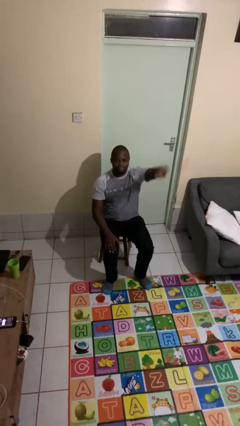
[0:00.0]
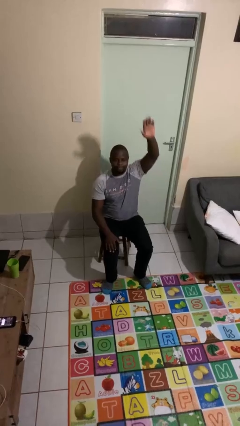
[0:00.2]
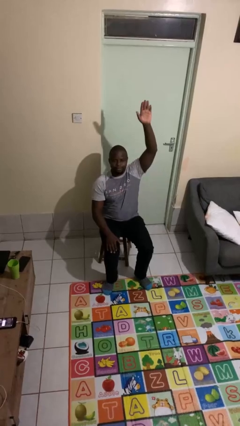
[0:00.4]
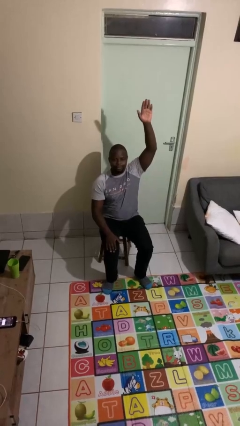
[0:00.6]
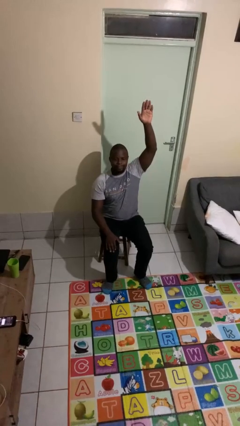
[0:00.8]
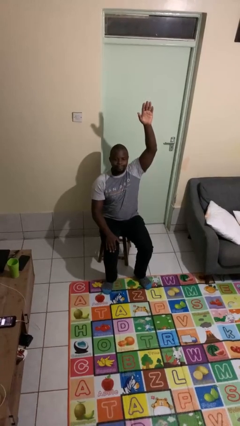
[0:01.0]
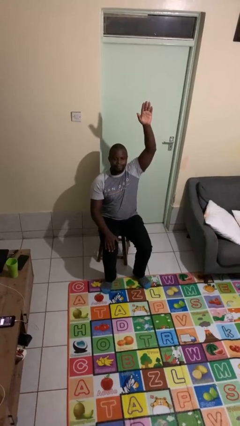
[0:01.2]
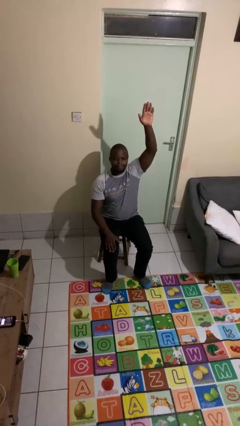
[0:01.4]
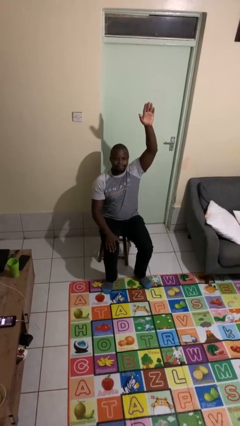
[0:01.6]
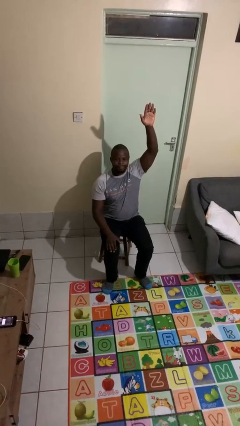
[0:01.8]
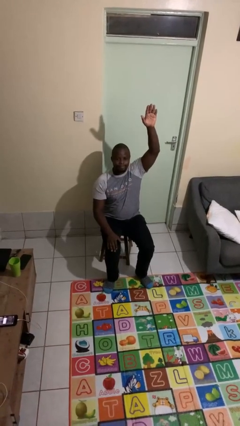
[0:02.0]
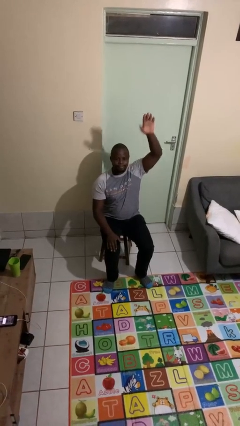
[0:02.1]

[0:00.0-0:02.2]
person gestures raise hand

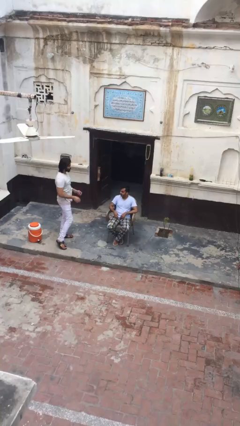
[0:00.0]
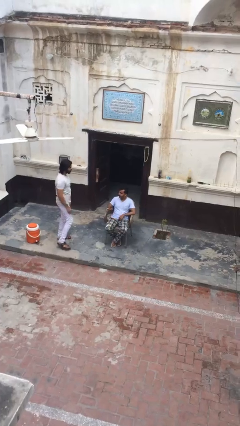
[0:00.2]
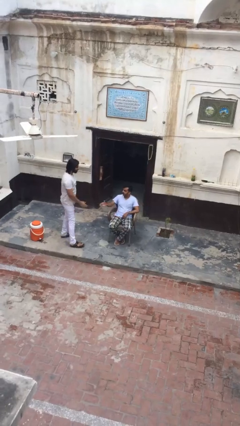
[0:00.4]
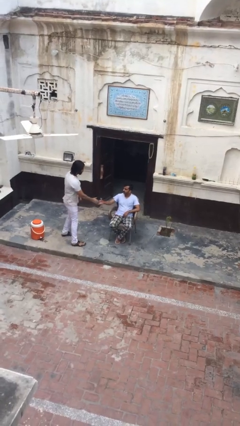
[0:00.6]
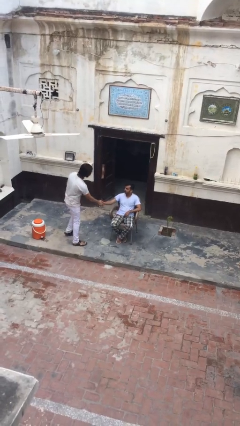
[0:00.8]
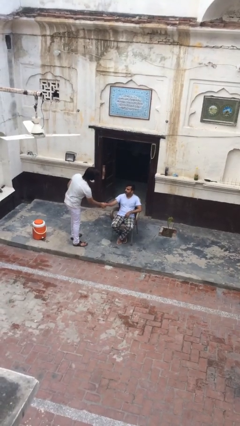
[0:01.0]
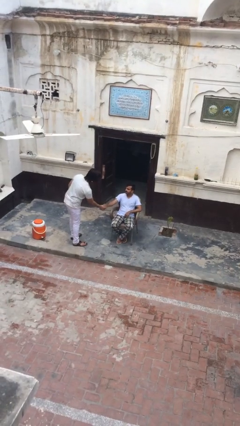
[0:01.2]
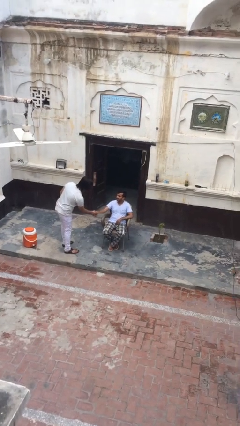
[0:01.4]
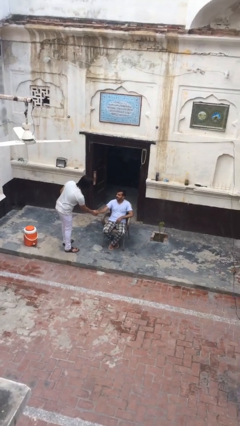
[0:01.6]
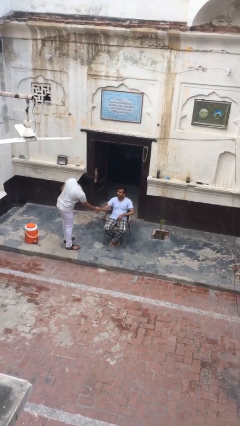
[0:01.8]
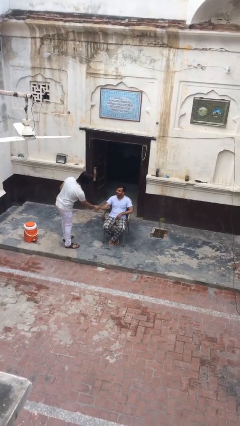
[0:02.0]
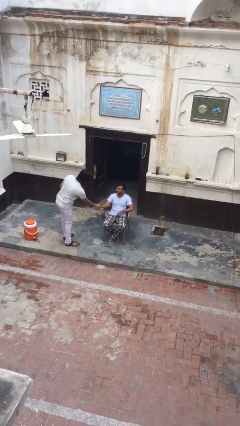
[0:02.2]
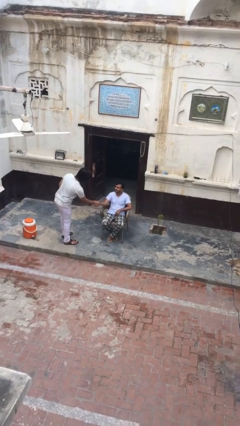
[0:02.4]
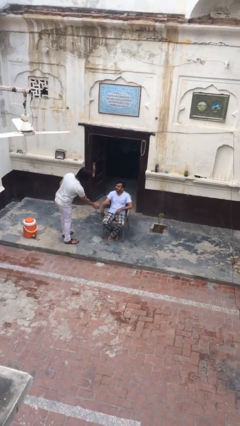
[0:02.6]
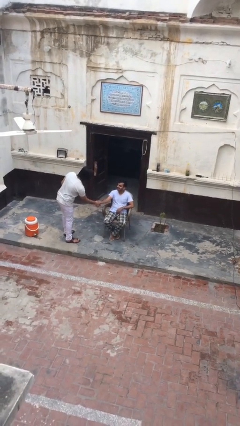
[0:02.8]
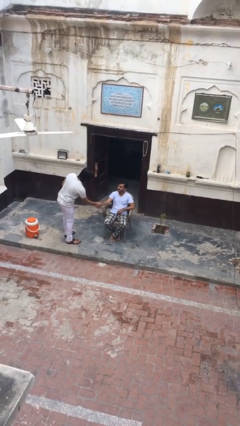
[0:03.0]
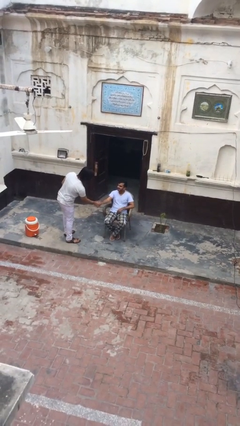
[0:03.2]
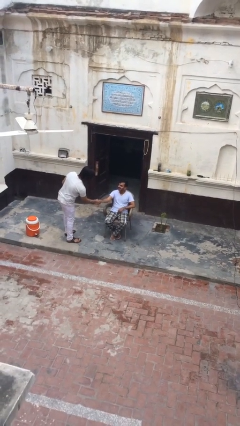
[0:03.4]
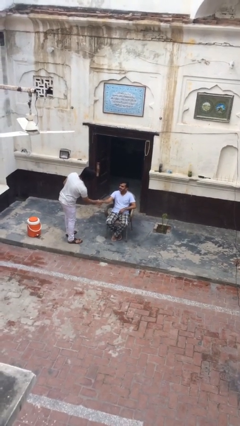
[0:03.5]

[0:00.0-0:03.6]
person shakes hand

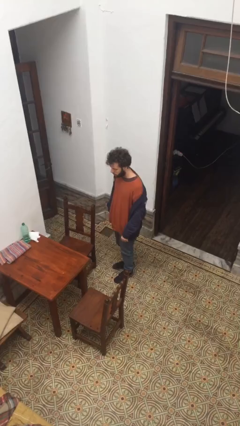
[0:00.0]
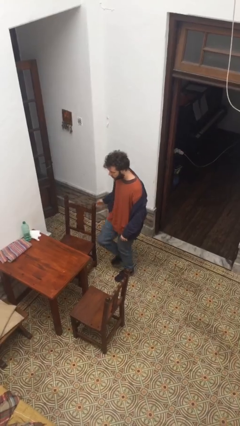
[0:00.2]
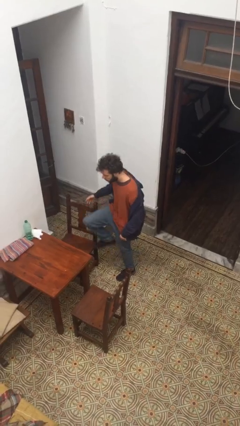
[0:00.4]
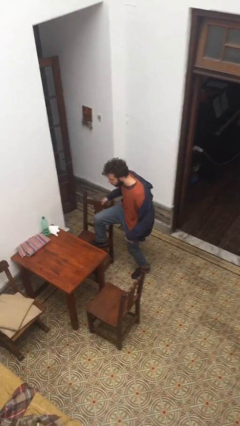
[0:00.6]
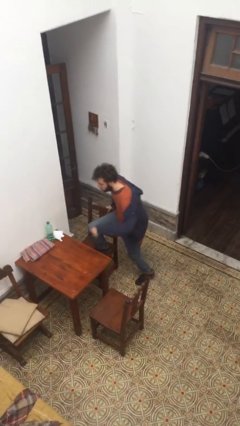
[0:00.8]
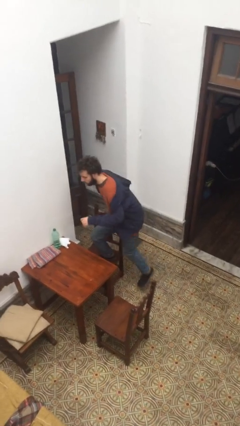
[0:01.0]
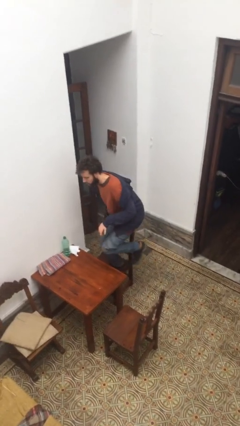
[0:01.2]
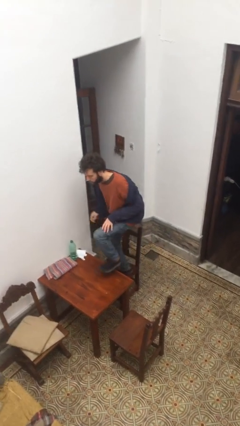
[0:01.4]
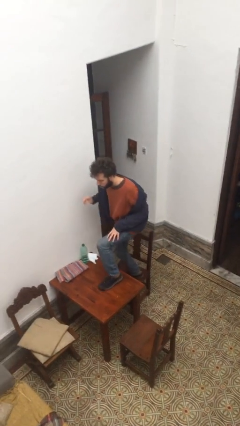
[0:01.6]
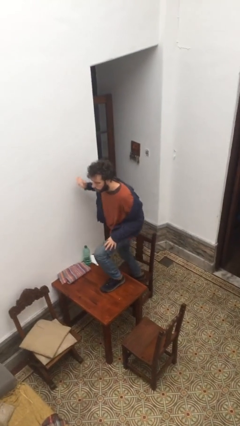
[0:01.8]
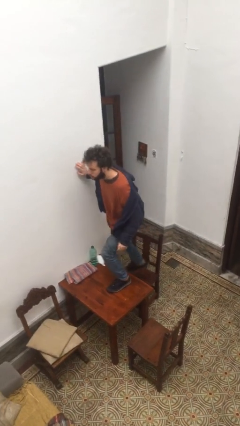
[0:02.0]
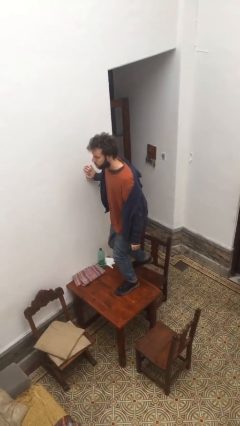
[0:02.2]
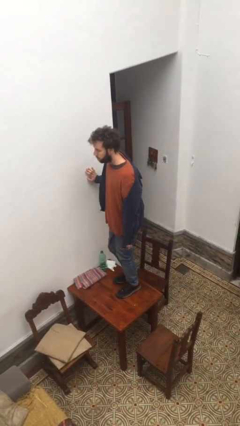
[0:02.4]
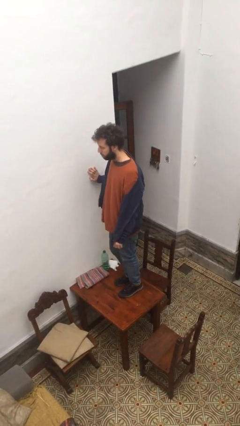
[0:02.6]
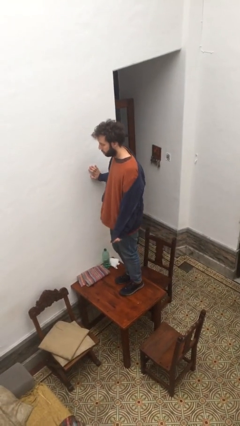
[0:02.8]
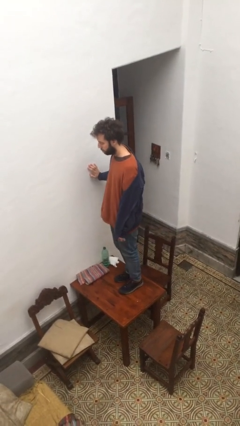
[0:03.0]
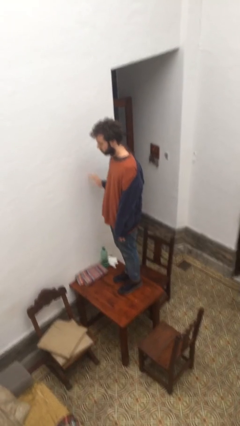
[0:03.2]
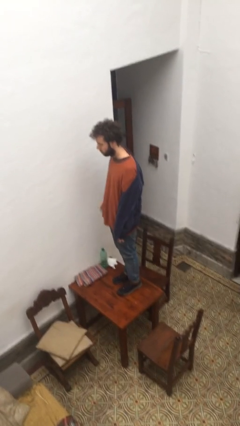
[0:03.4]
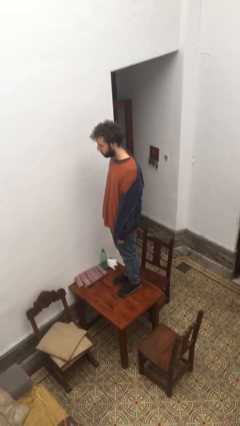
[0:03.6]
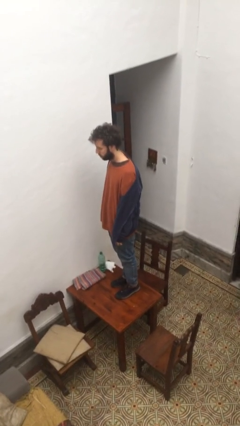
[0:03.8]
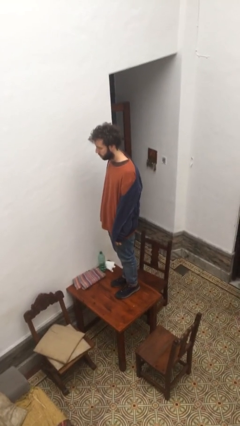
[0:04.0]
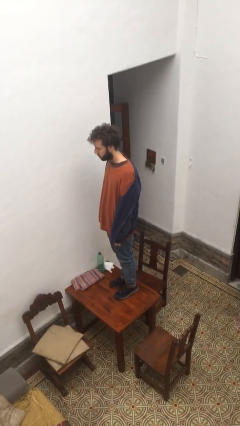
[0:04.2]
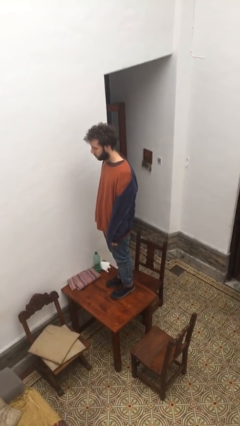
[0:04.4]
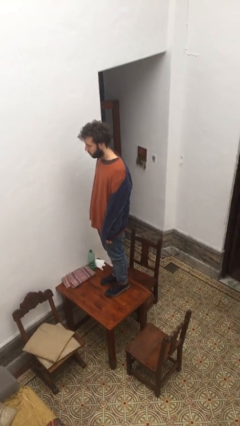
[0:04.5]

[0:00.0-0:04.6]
person climbs on table

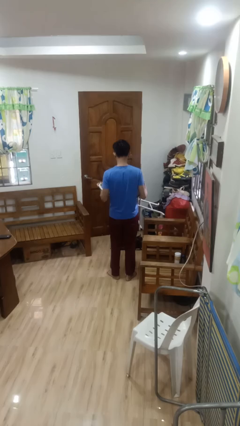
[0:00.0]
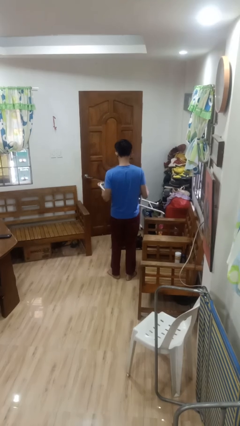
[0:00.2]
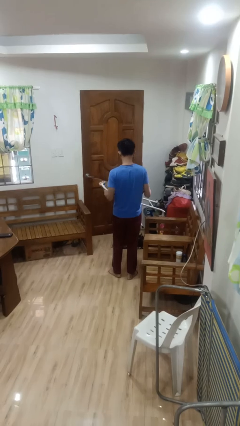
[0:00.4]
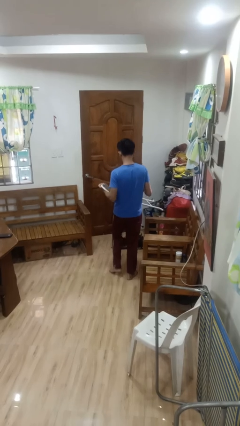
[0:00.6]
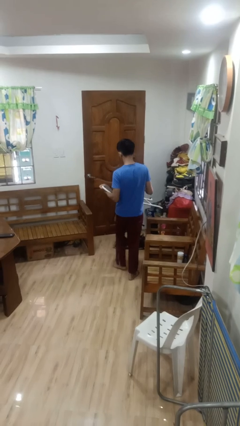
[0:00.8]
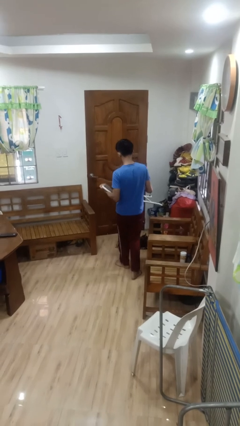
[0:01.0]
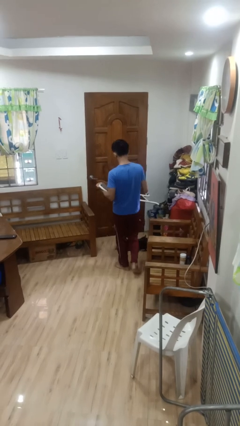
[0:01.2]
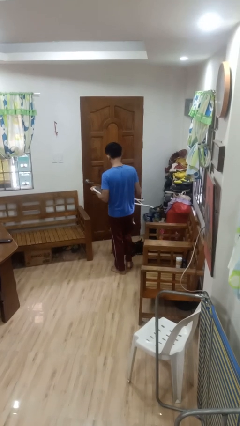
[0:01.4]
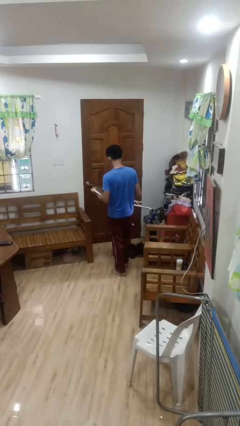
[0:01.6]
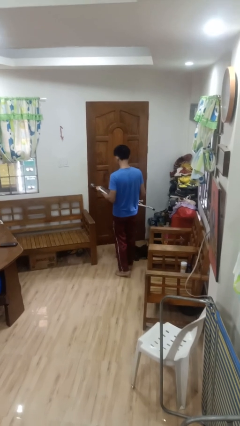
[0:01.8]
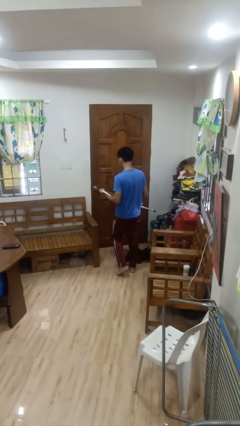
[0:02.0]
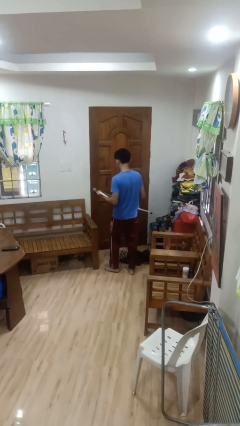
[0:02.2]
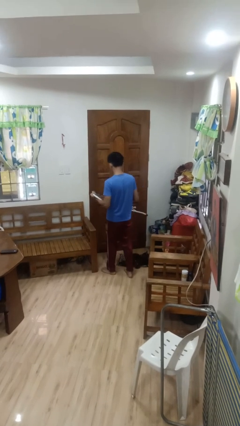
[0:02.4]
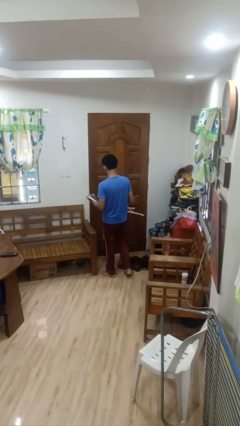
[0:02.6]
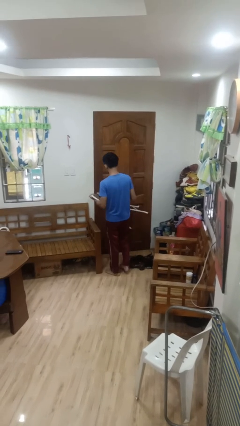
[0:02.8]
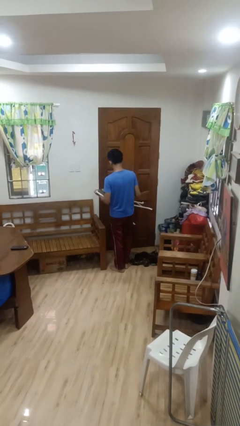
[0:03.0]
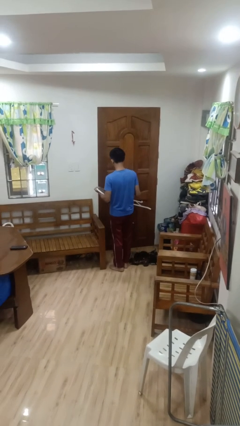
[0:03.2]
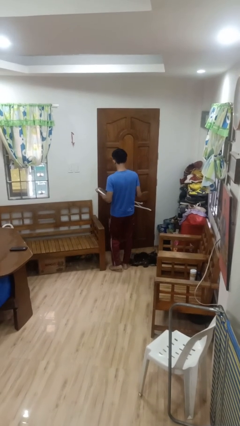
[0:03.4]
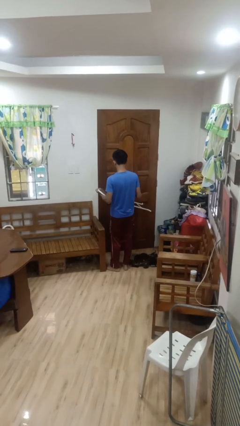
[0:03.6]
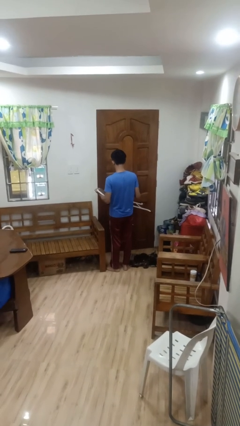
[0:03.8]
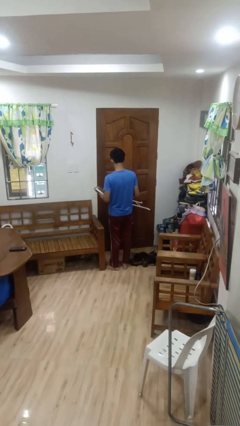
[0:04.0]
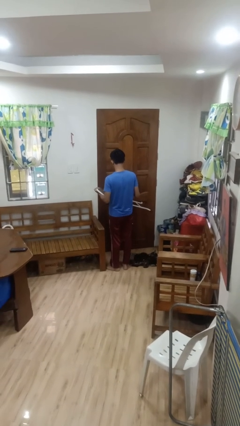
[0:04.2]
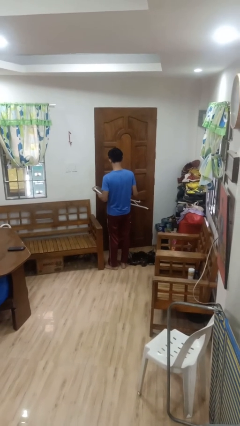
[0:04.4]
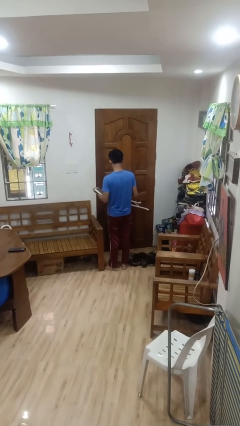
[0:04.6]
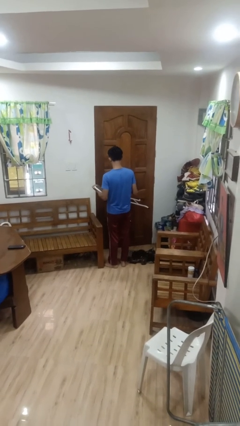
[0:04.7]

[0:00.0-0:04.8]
person carries furniture

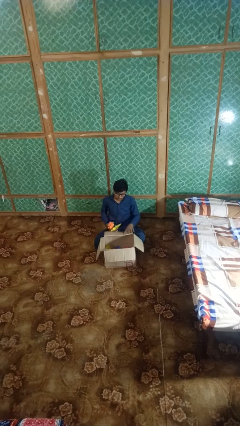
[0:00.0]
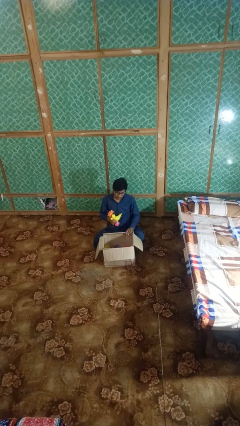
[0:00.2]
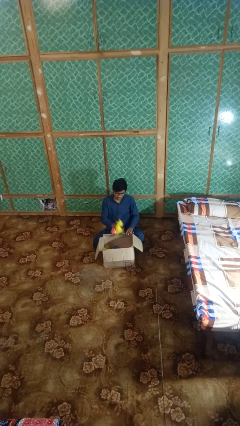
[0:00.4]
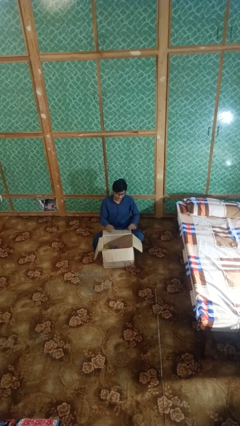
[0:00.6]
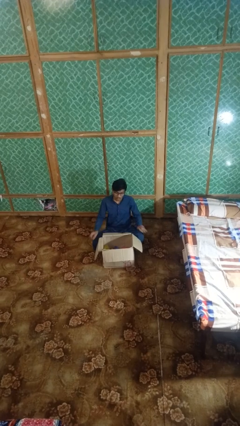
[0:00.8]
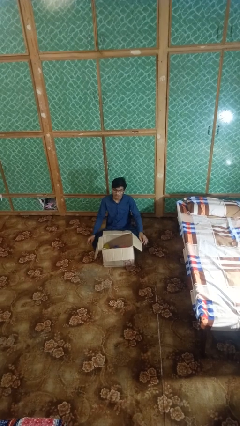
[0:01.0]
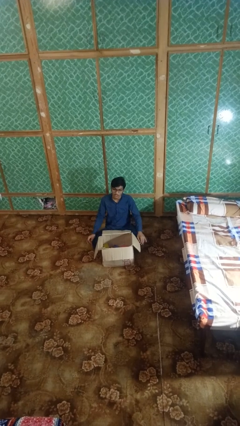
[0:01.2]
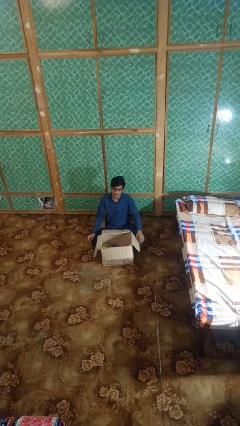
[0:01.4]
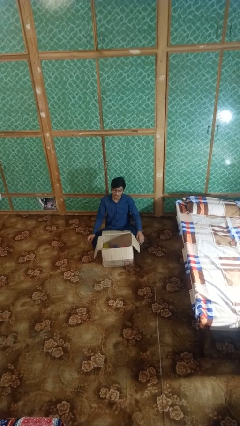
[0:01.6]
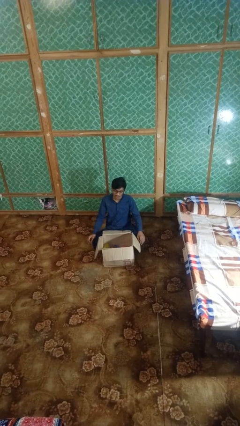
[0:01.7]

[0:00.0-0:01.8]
person puts object into box

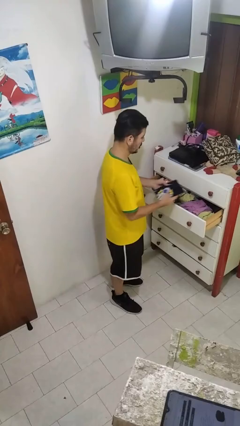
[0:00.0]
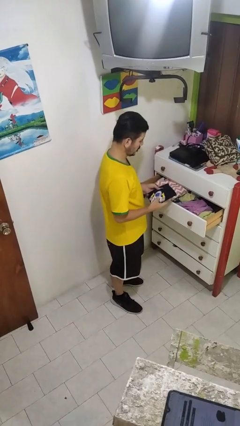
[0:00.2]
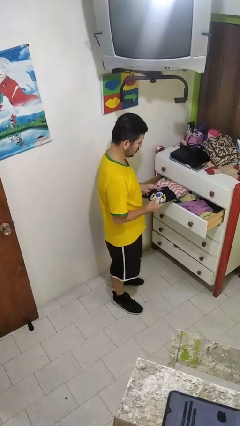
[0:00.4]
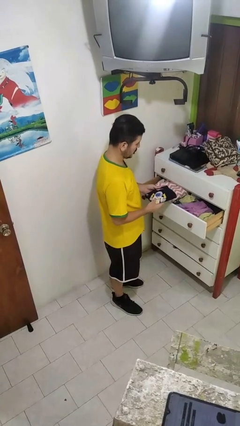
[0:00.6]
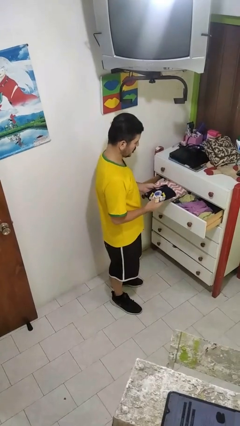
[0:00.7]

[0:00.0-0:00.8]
person takes clothes from dresser
